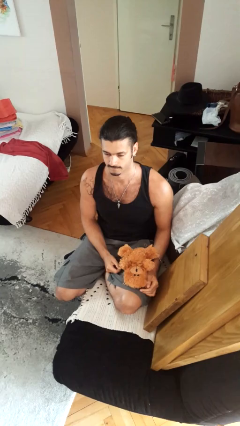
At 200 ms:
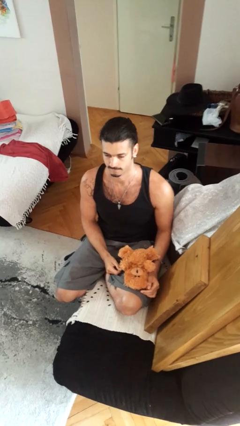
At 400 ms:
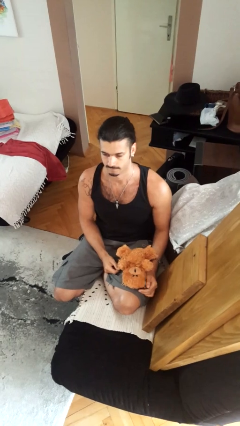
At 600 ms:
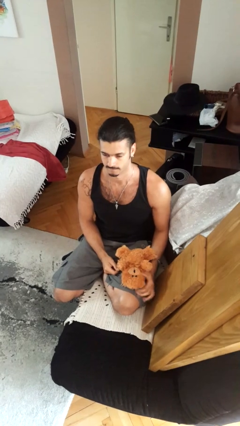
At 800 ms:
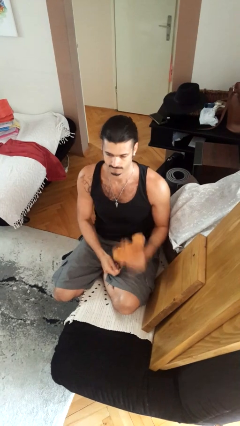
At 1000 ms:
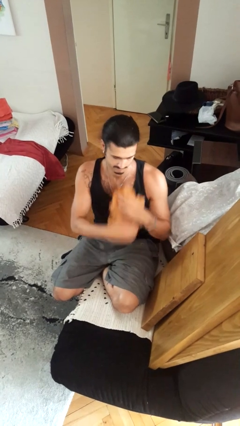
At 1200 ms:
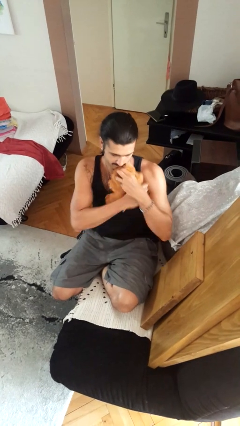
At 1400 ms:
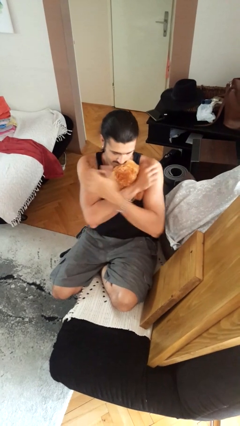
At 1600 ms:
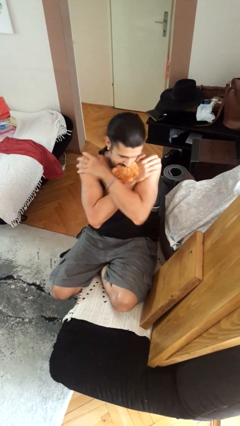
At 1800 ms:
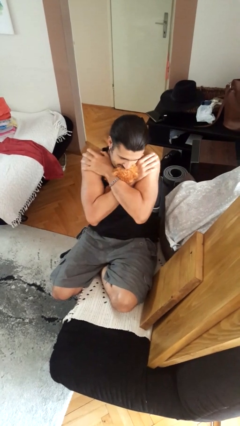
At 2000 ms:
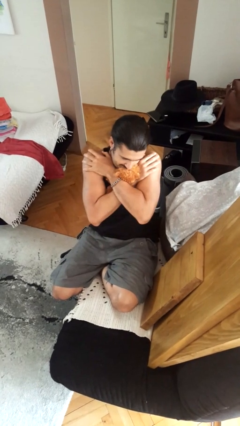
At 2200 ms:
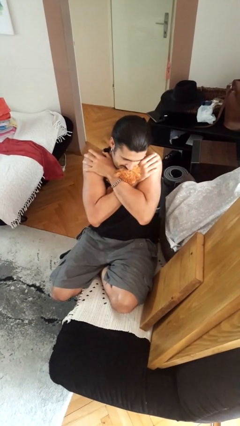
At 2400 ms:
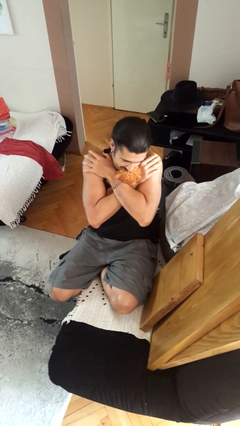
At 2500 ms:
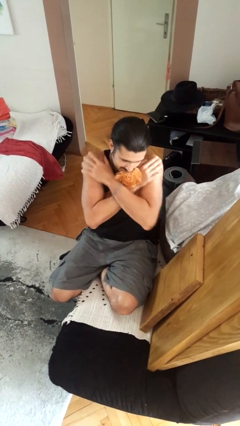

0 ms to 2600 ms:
person hugs stuffed animal

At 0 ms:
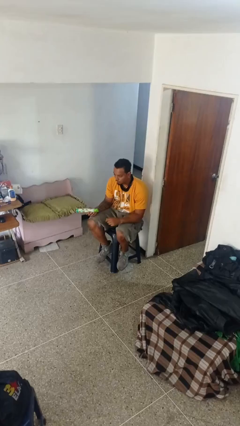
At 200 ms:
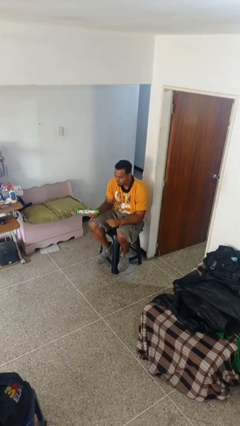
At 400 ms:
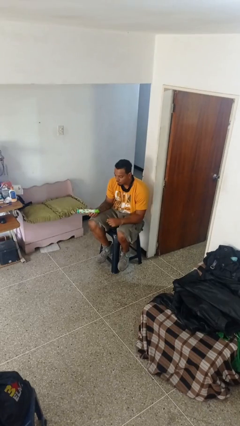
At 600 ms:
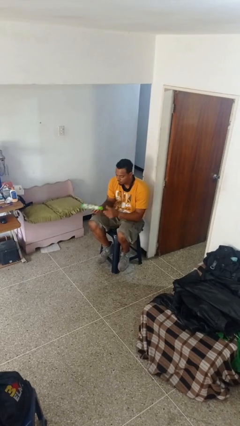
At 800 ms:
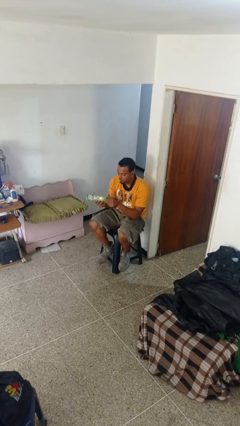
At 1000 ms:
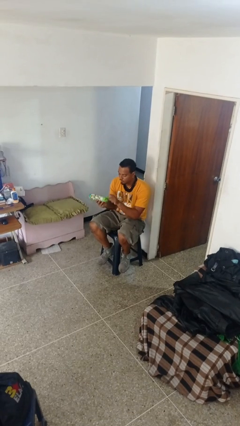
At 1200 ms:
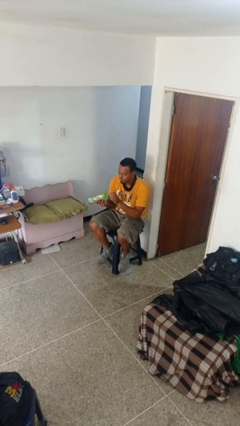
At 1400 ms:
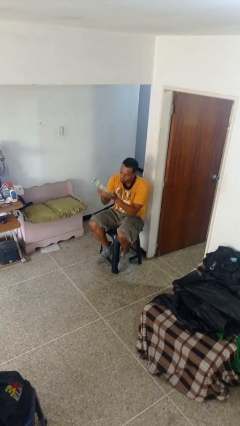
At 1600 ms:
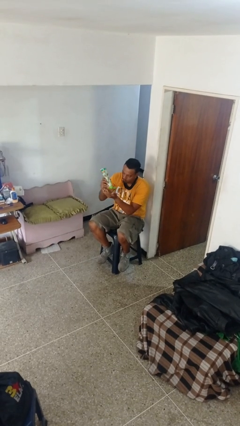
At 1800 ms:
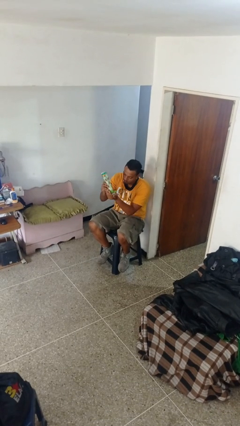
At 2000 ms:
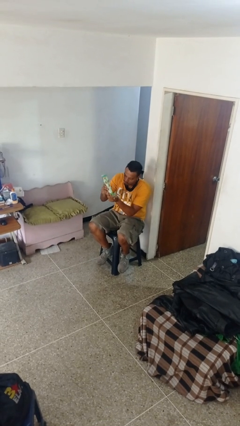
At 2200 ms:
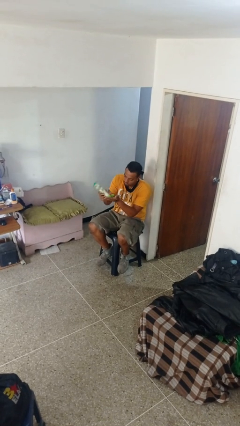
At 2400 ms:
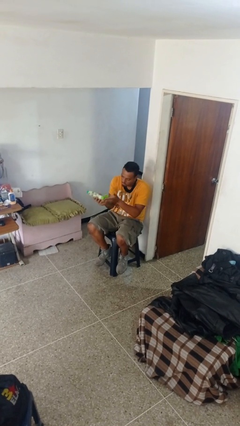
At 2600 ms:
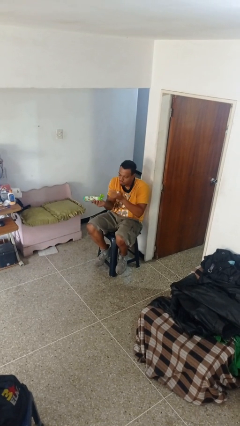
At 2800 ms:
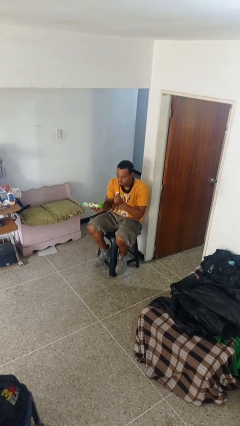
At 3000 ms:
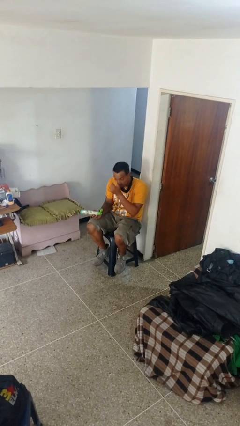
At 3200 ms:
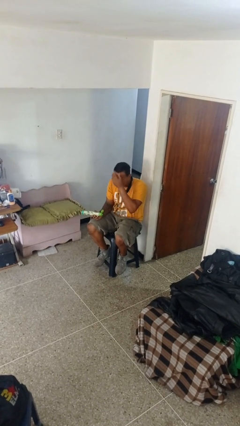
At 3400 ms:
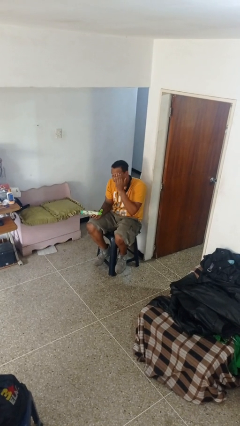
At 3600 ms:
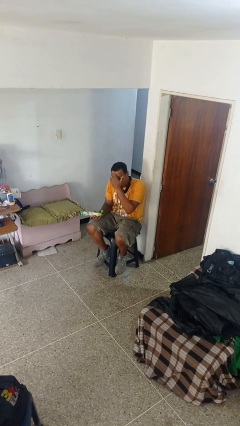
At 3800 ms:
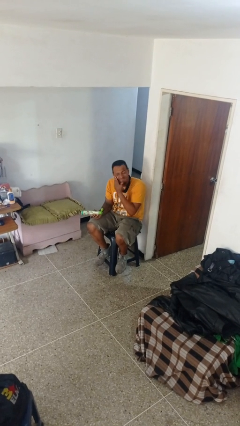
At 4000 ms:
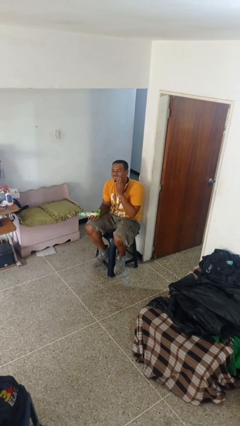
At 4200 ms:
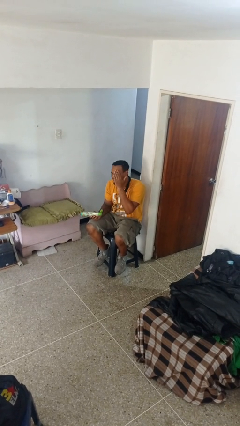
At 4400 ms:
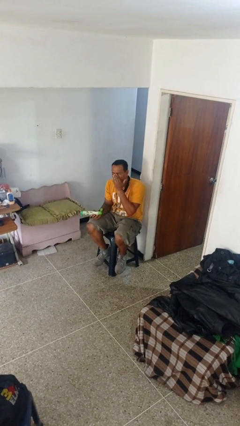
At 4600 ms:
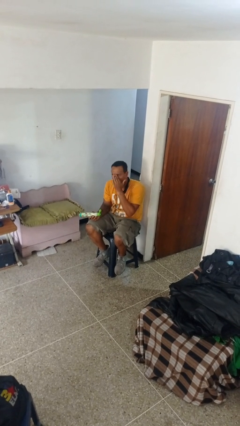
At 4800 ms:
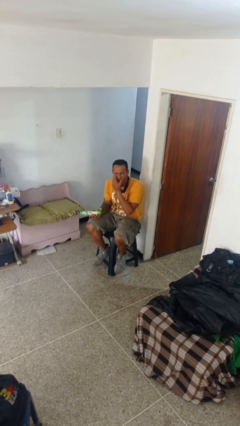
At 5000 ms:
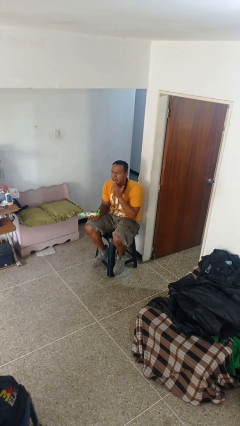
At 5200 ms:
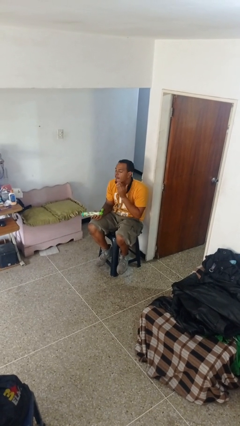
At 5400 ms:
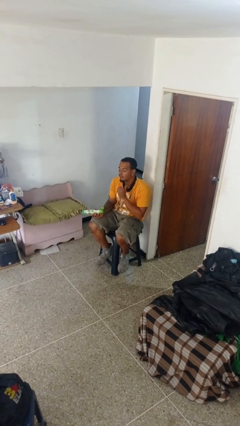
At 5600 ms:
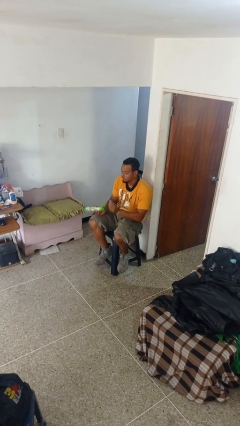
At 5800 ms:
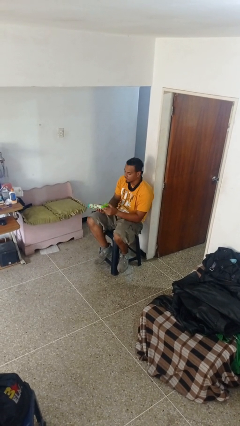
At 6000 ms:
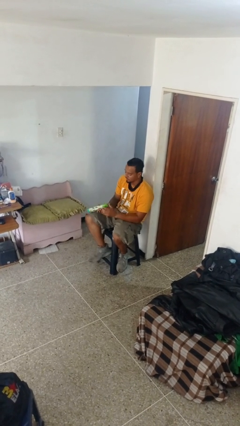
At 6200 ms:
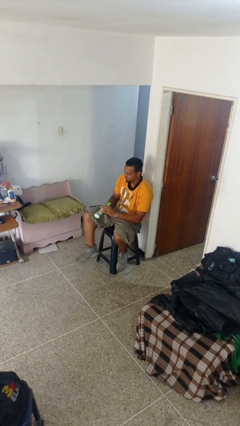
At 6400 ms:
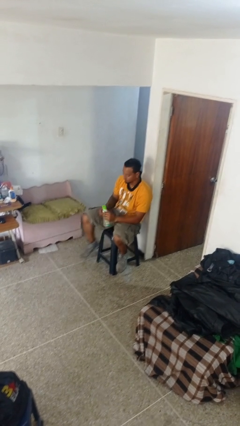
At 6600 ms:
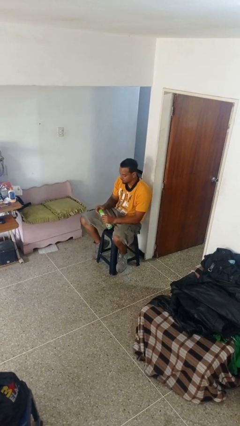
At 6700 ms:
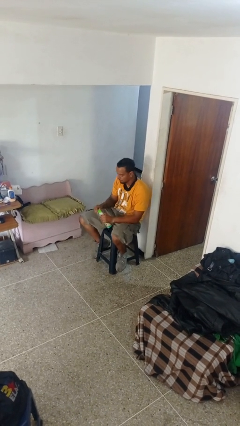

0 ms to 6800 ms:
person applies facial moisturizer

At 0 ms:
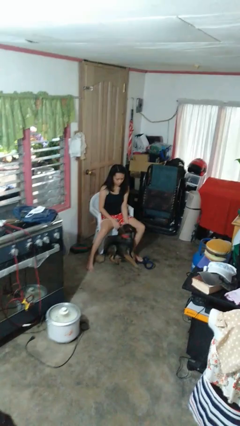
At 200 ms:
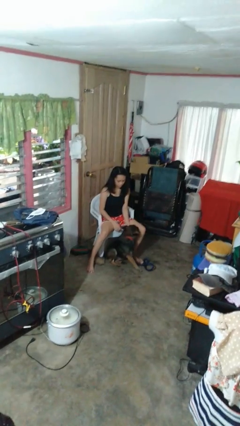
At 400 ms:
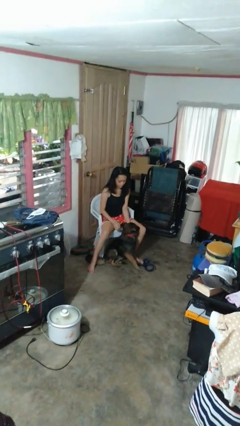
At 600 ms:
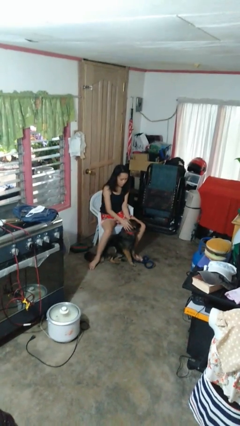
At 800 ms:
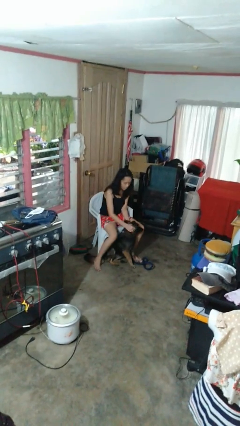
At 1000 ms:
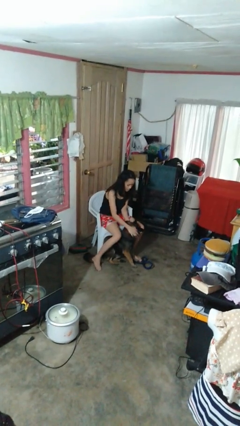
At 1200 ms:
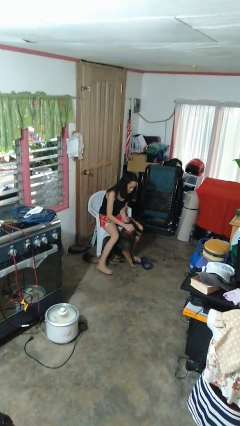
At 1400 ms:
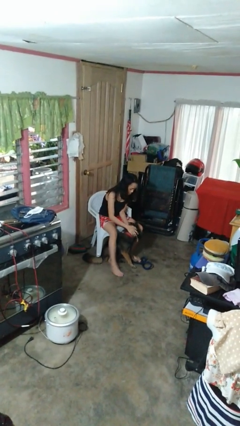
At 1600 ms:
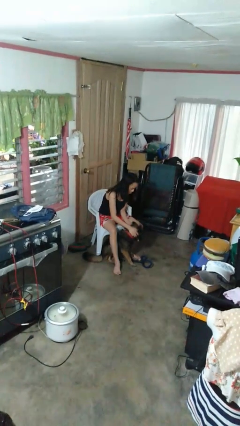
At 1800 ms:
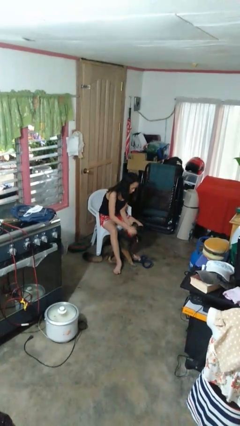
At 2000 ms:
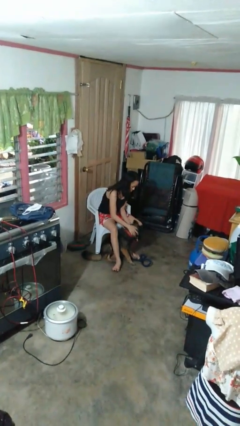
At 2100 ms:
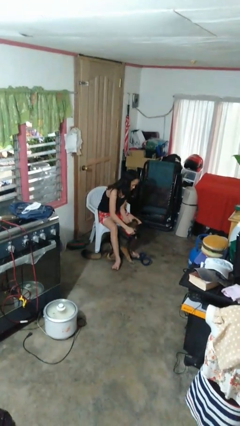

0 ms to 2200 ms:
person pets dog

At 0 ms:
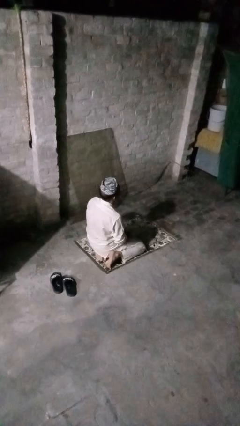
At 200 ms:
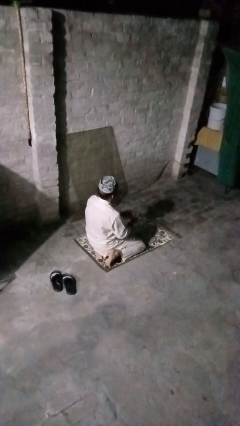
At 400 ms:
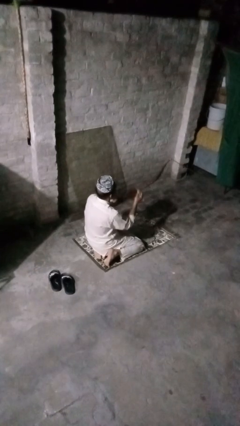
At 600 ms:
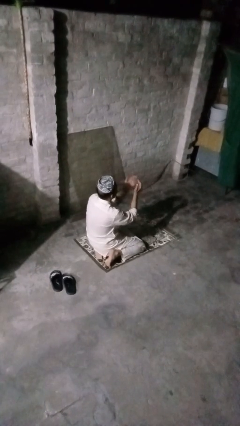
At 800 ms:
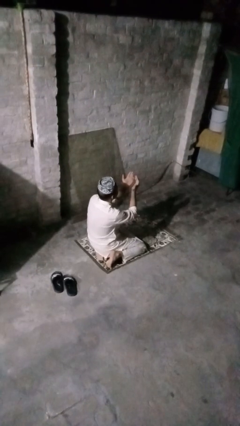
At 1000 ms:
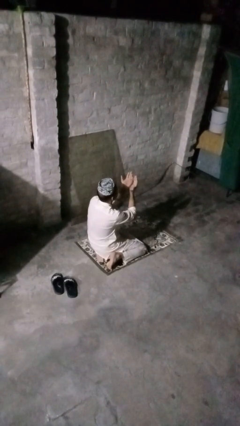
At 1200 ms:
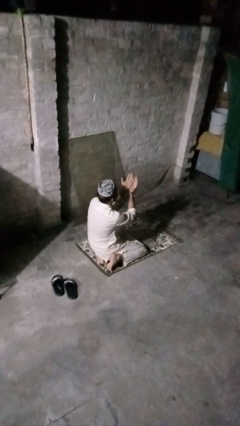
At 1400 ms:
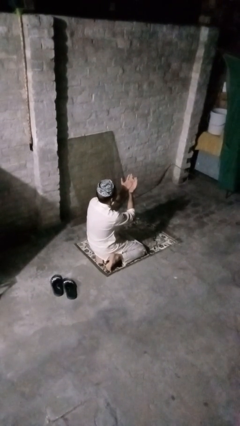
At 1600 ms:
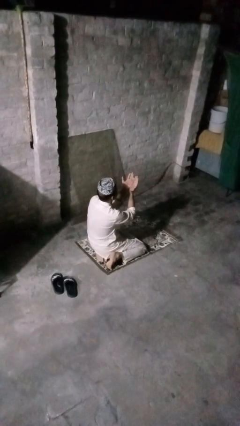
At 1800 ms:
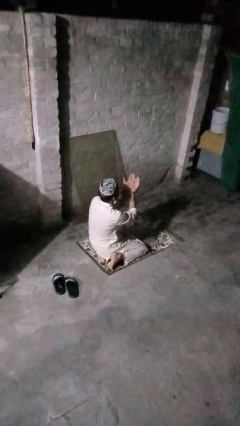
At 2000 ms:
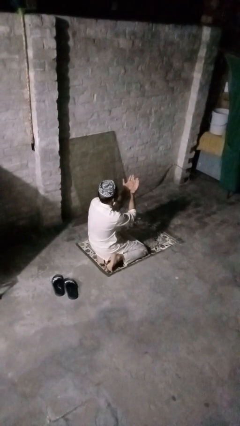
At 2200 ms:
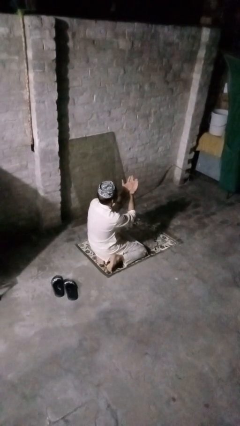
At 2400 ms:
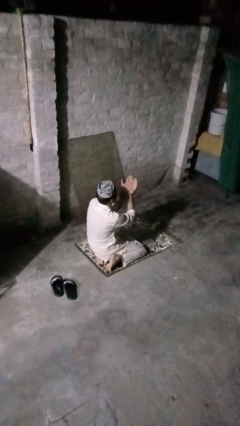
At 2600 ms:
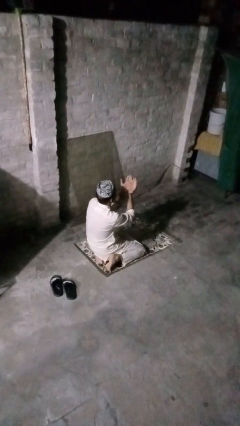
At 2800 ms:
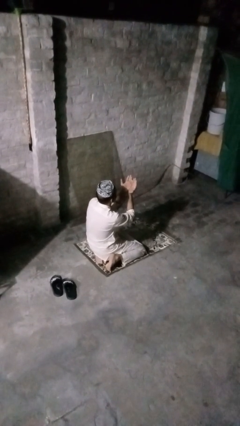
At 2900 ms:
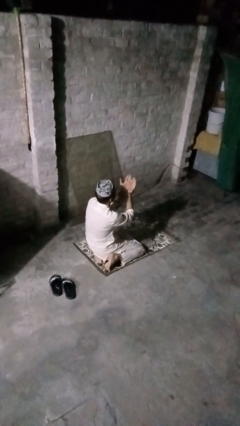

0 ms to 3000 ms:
person prays

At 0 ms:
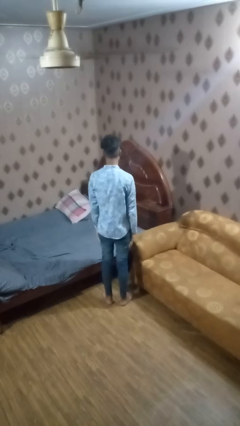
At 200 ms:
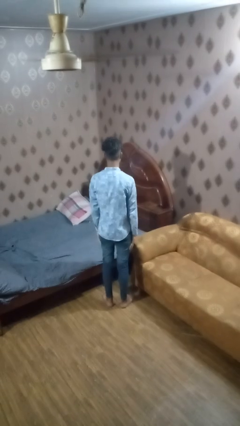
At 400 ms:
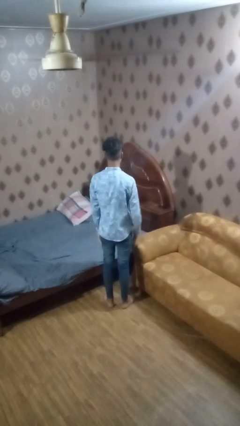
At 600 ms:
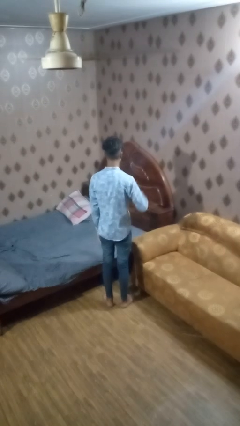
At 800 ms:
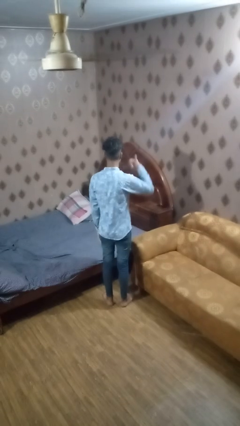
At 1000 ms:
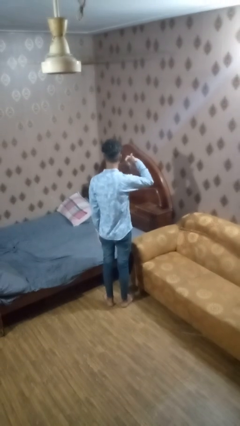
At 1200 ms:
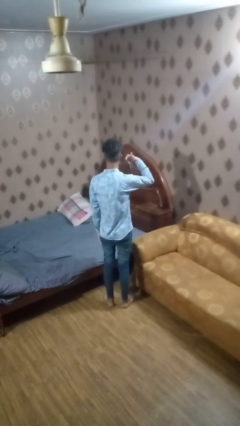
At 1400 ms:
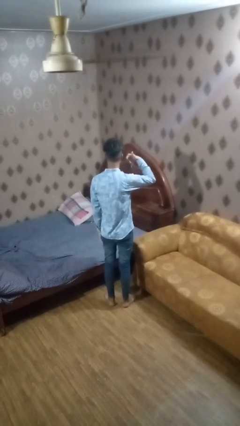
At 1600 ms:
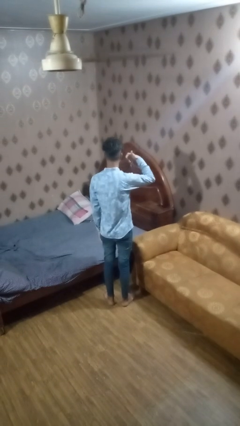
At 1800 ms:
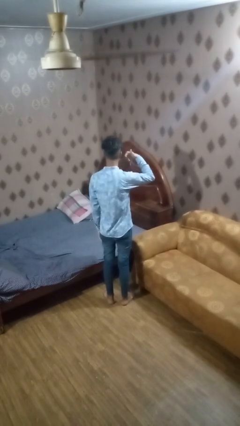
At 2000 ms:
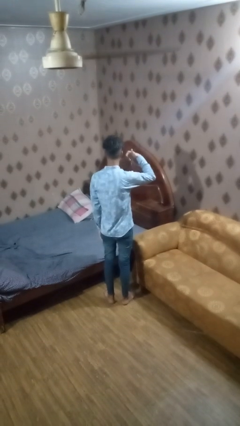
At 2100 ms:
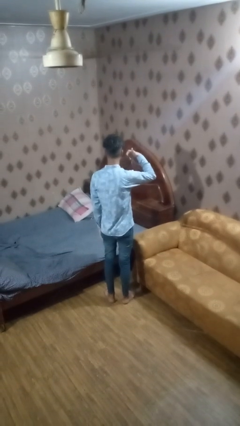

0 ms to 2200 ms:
person gestures call me

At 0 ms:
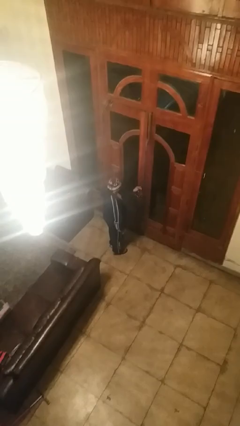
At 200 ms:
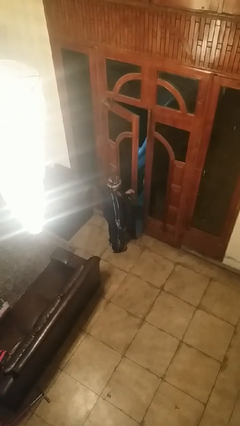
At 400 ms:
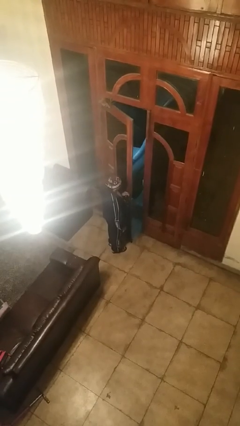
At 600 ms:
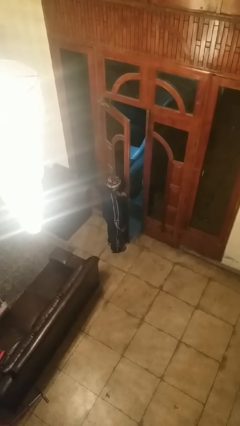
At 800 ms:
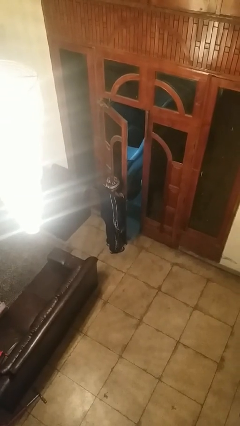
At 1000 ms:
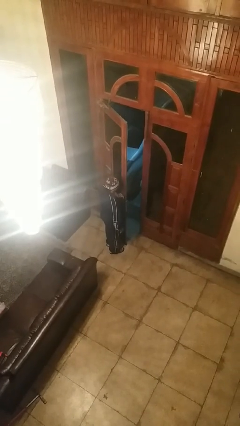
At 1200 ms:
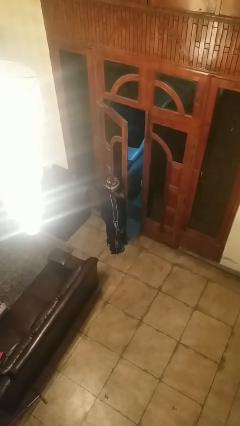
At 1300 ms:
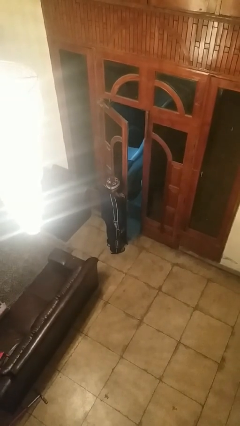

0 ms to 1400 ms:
person opens facility door
